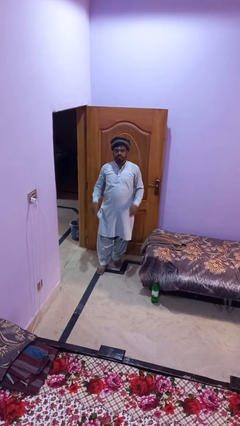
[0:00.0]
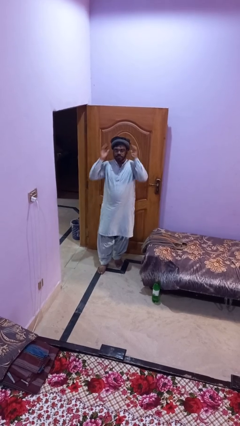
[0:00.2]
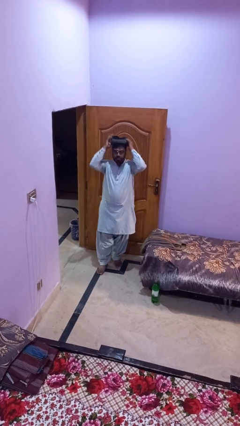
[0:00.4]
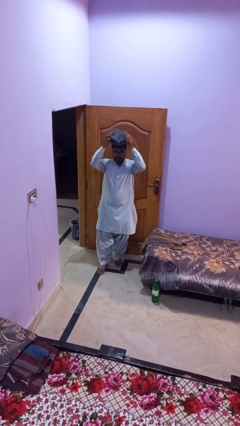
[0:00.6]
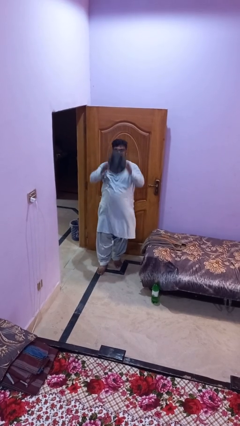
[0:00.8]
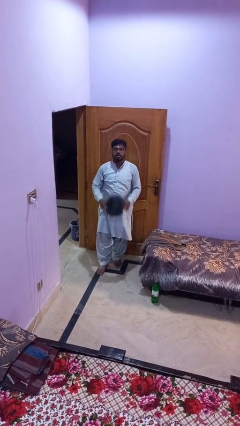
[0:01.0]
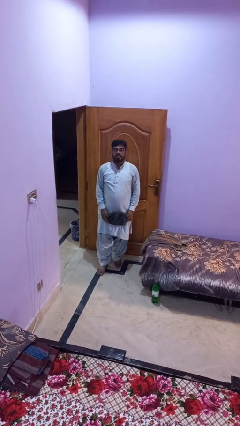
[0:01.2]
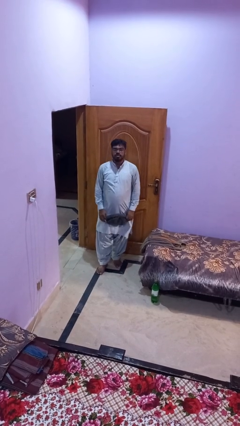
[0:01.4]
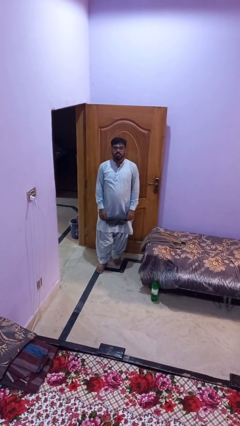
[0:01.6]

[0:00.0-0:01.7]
person takes off hat

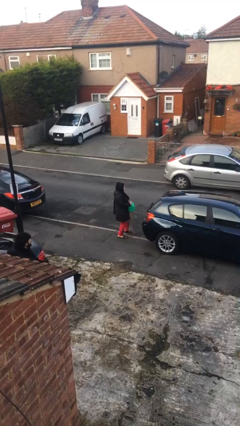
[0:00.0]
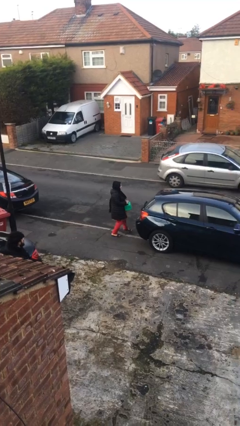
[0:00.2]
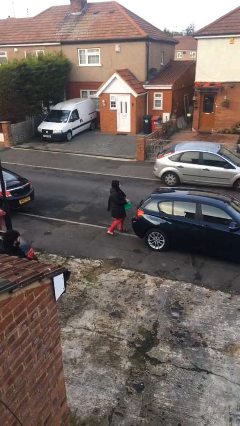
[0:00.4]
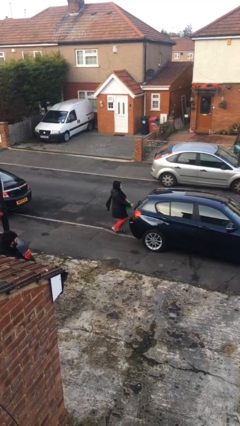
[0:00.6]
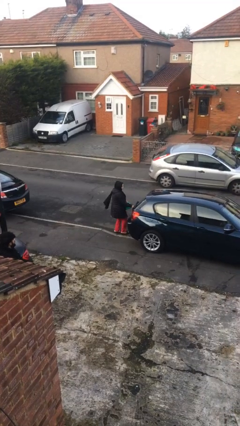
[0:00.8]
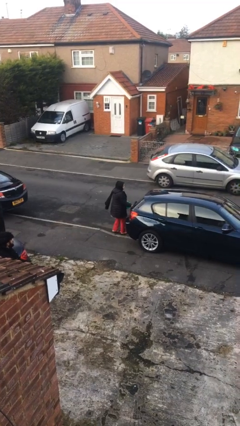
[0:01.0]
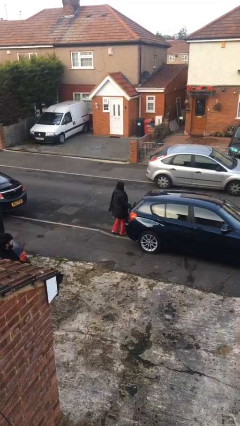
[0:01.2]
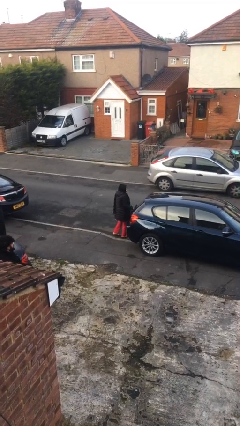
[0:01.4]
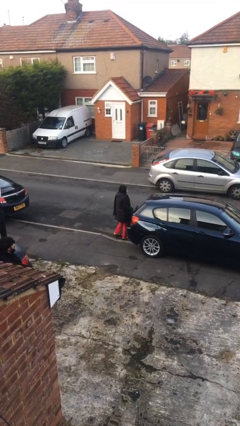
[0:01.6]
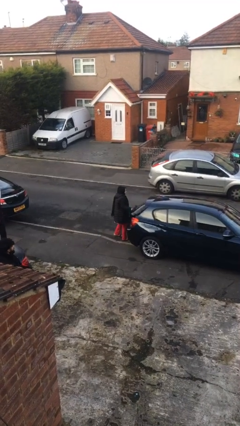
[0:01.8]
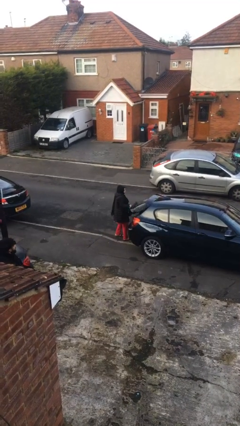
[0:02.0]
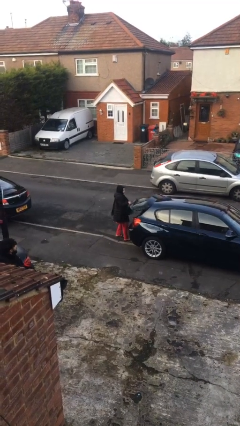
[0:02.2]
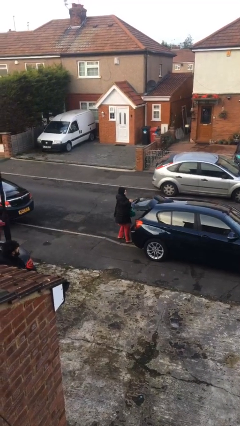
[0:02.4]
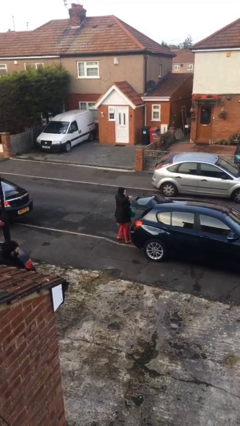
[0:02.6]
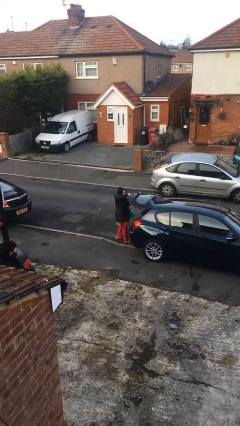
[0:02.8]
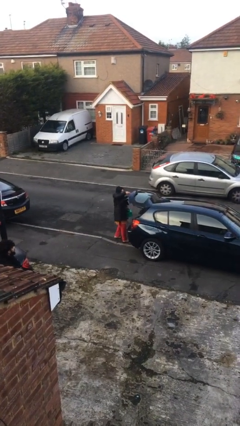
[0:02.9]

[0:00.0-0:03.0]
person opens car trunk

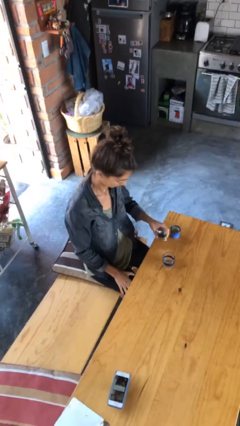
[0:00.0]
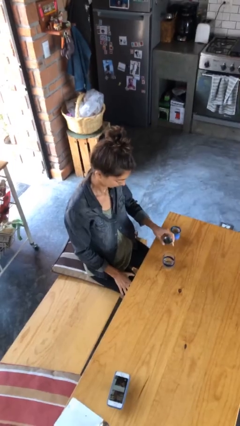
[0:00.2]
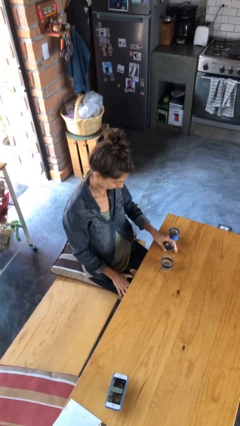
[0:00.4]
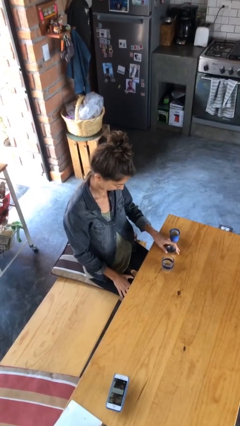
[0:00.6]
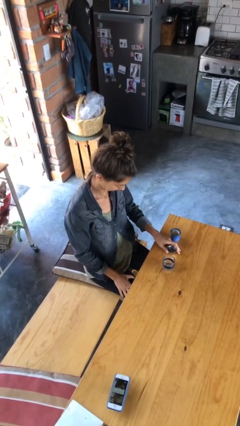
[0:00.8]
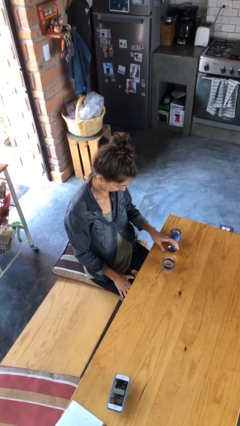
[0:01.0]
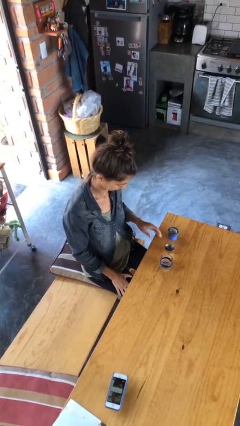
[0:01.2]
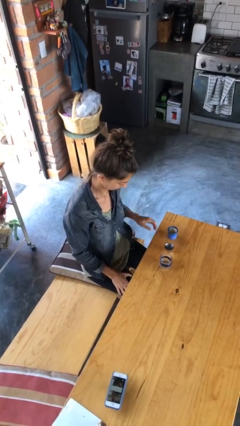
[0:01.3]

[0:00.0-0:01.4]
person puts down object on table

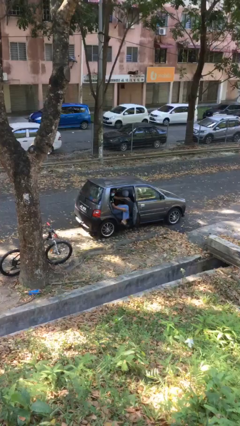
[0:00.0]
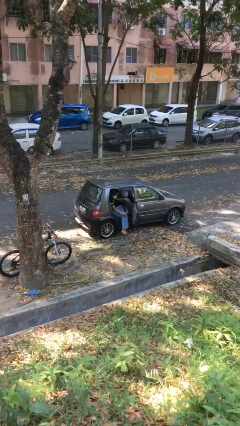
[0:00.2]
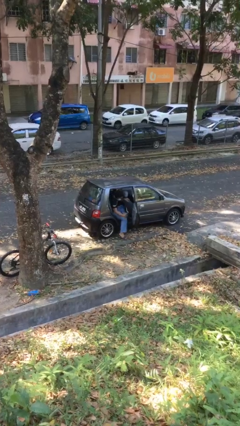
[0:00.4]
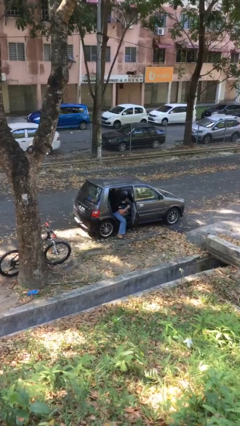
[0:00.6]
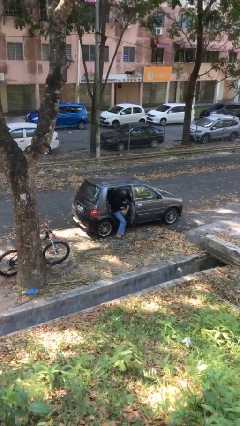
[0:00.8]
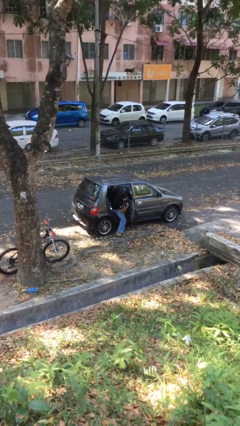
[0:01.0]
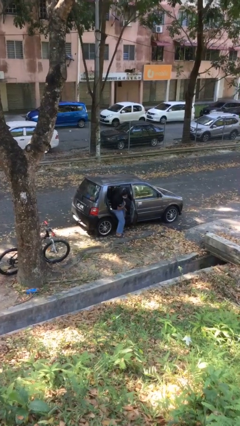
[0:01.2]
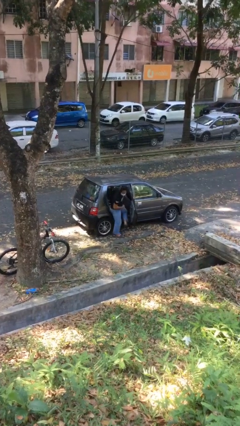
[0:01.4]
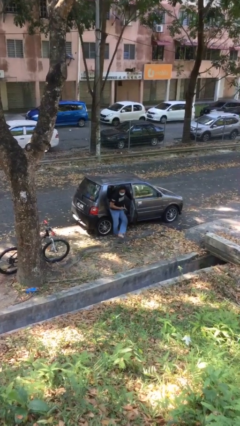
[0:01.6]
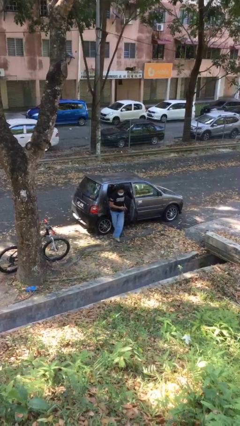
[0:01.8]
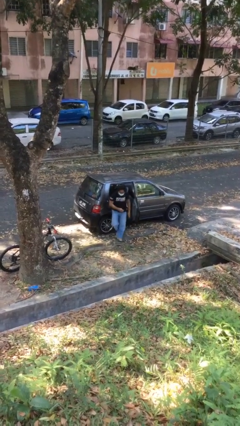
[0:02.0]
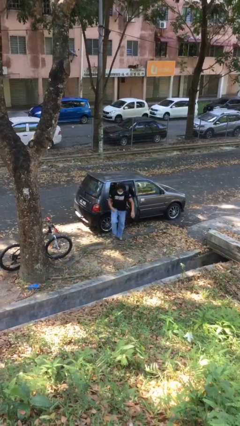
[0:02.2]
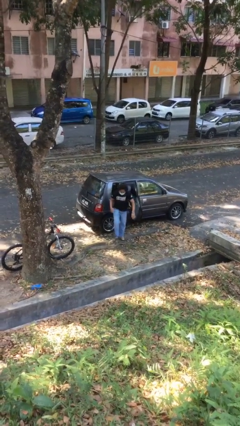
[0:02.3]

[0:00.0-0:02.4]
person exits car

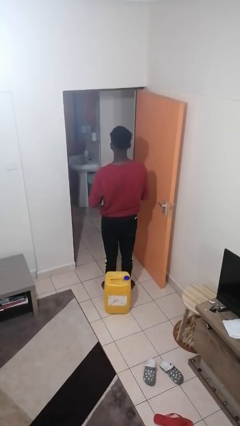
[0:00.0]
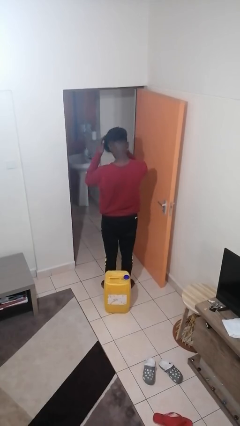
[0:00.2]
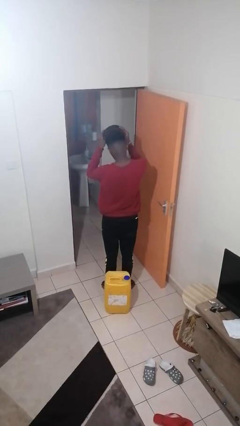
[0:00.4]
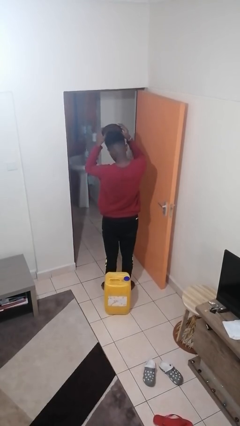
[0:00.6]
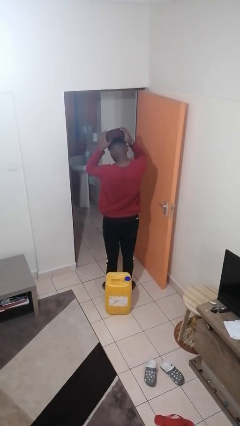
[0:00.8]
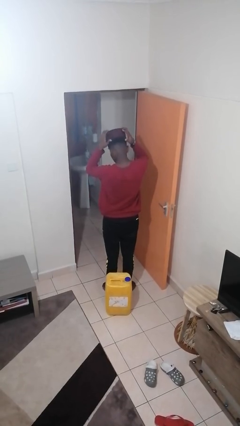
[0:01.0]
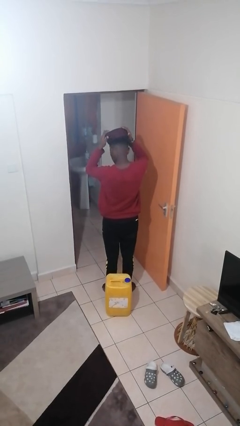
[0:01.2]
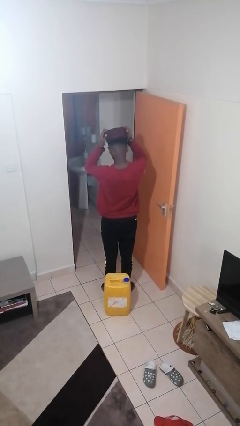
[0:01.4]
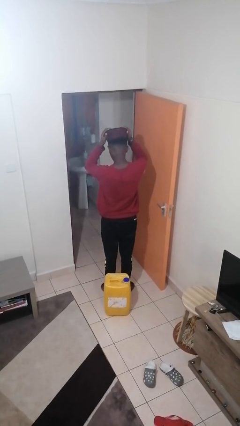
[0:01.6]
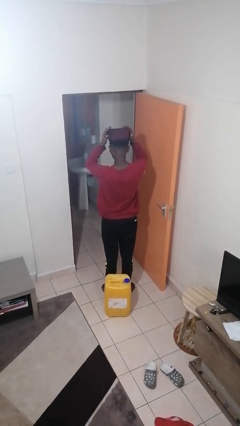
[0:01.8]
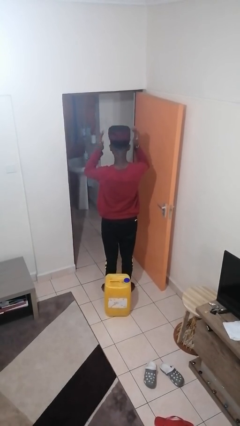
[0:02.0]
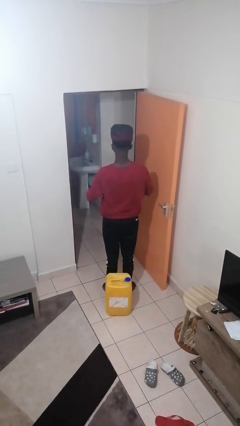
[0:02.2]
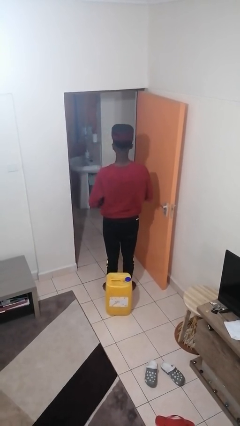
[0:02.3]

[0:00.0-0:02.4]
person puts on hat

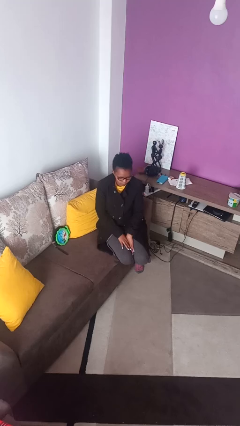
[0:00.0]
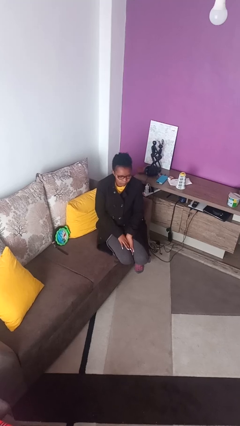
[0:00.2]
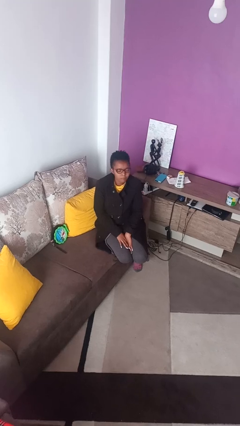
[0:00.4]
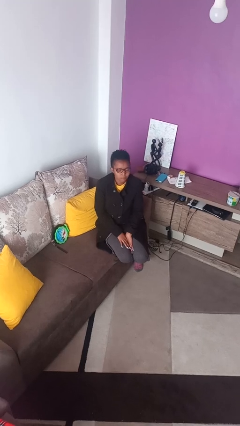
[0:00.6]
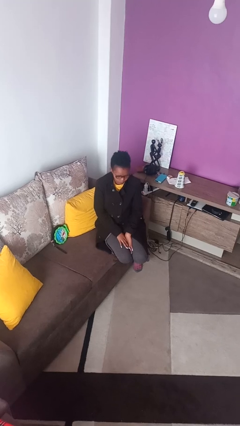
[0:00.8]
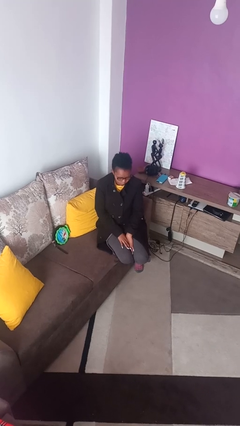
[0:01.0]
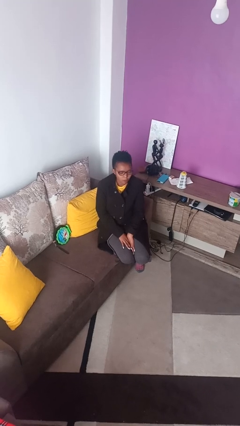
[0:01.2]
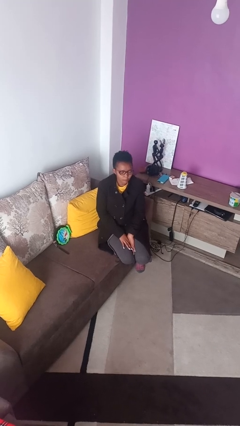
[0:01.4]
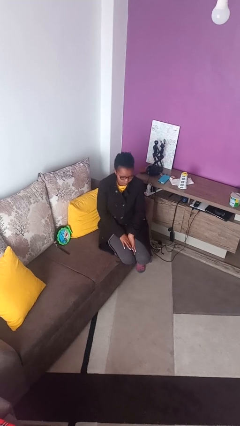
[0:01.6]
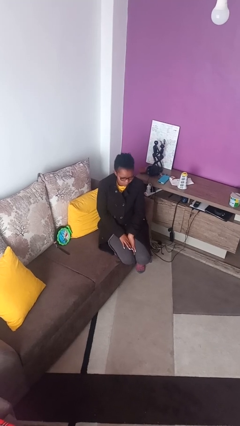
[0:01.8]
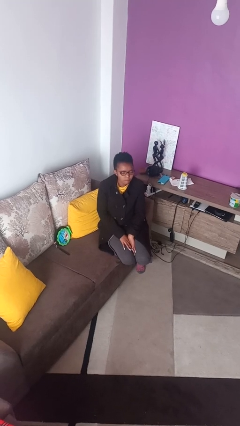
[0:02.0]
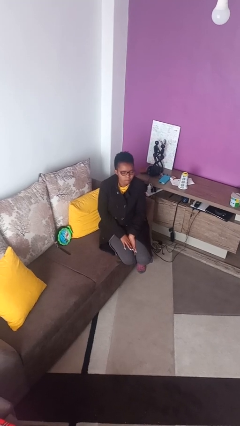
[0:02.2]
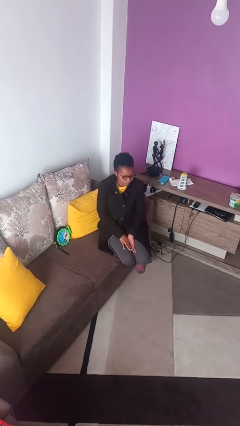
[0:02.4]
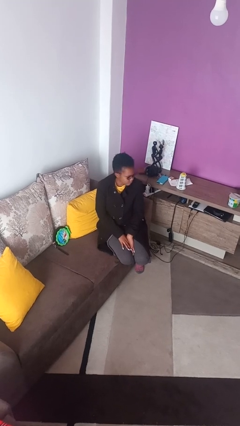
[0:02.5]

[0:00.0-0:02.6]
person nods head

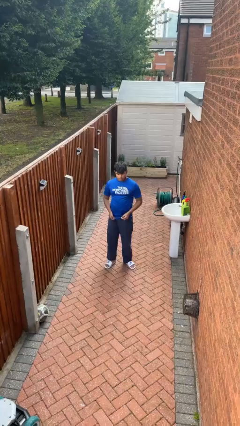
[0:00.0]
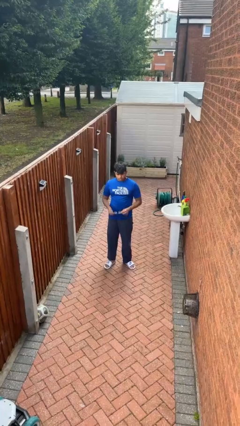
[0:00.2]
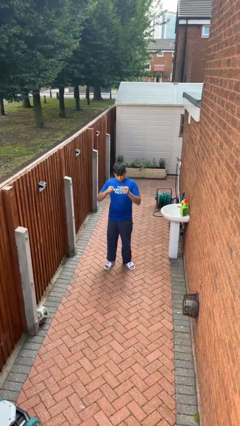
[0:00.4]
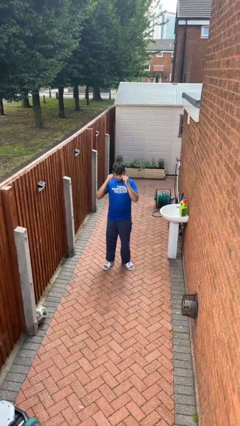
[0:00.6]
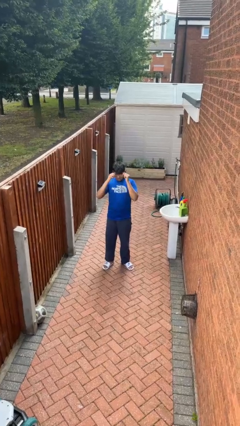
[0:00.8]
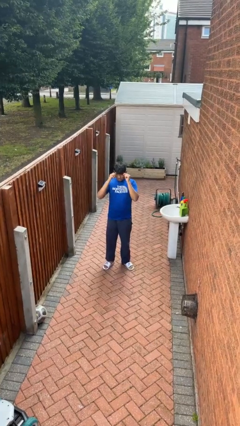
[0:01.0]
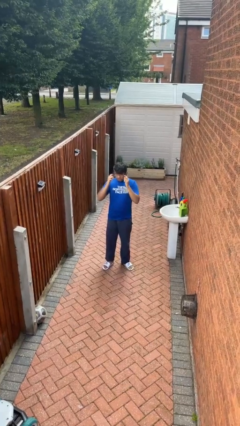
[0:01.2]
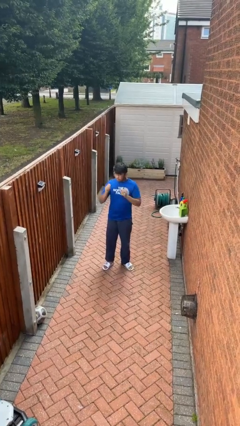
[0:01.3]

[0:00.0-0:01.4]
person puts on glasses

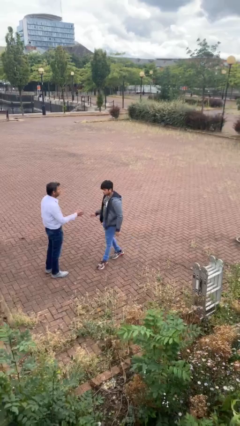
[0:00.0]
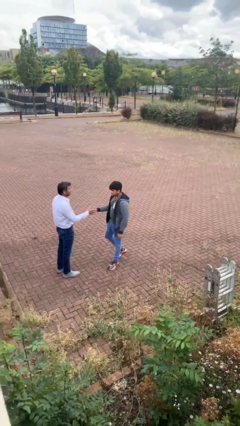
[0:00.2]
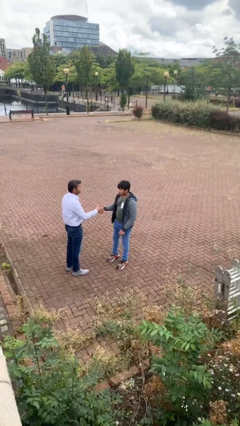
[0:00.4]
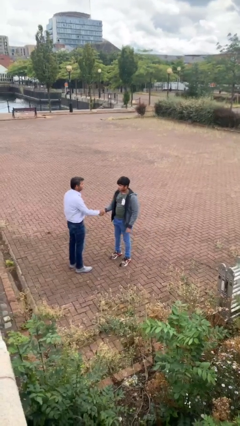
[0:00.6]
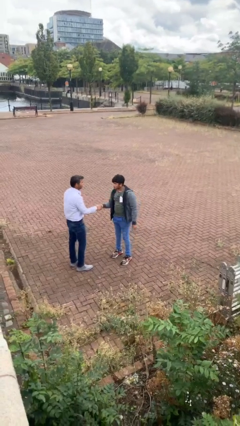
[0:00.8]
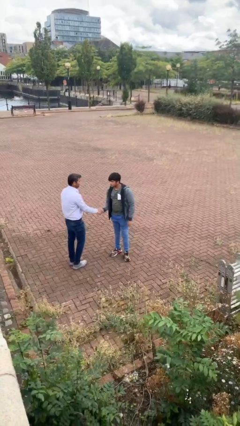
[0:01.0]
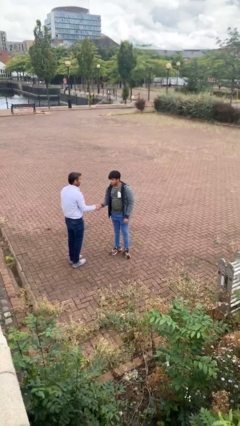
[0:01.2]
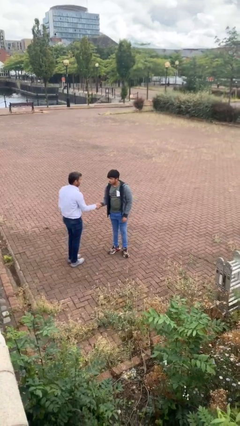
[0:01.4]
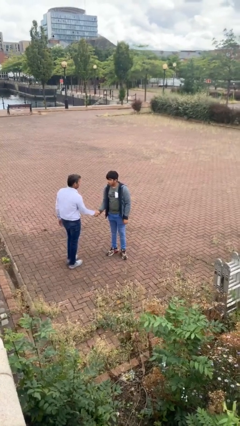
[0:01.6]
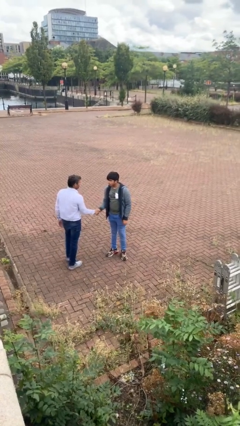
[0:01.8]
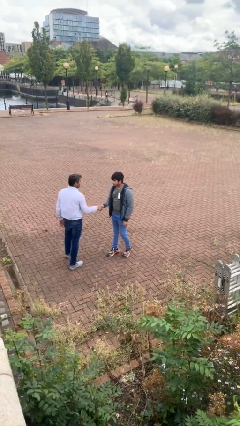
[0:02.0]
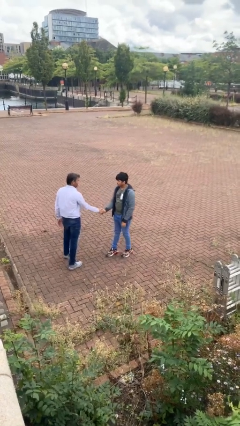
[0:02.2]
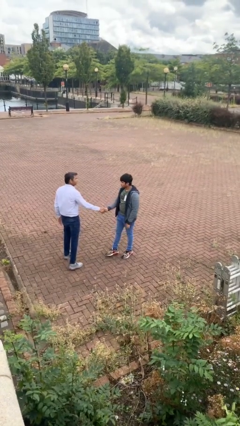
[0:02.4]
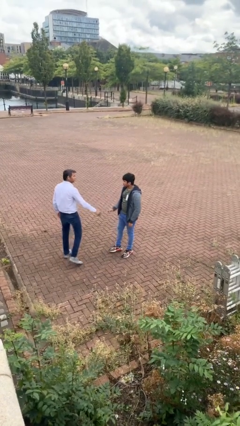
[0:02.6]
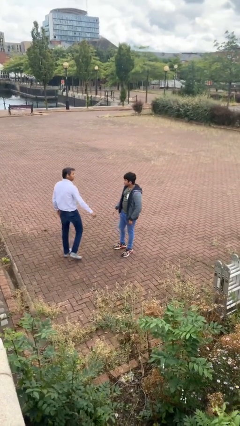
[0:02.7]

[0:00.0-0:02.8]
person shakes hand
